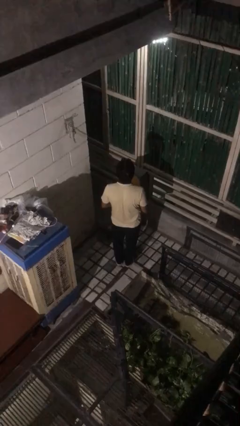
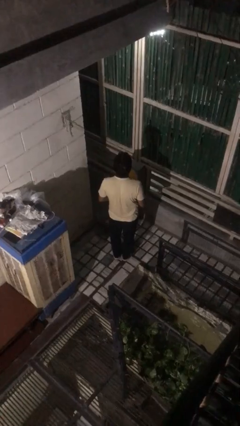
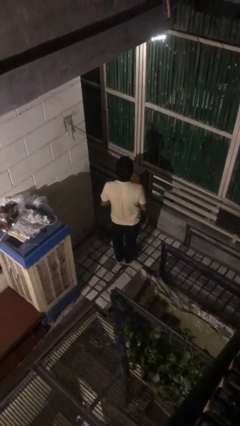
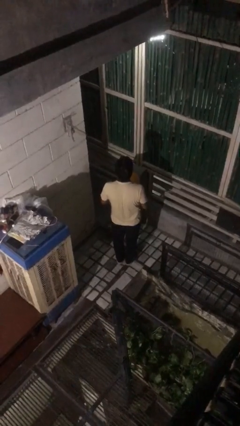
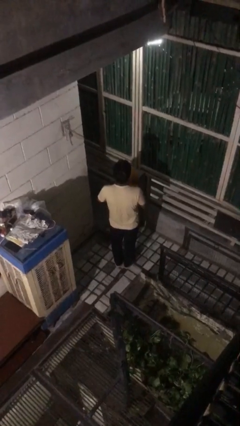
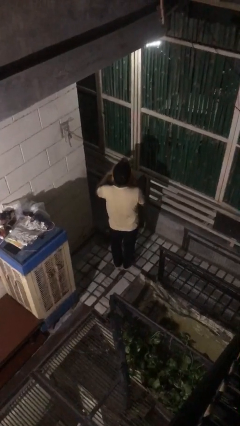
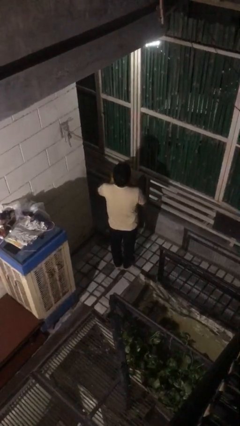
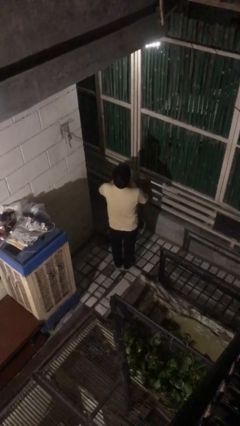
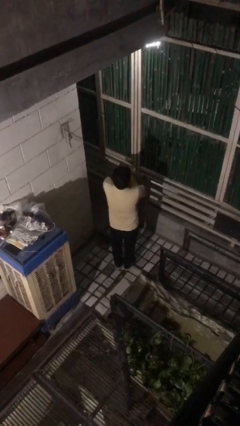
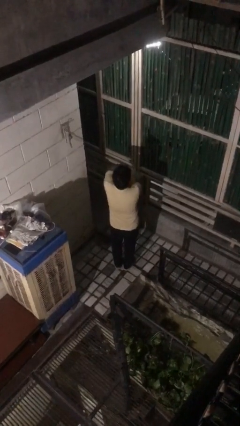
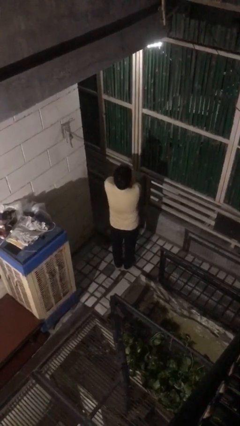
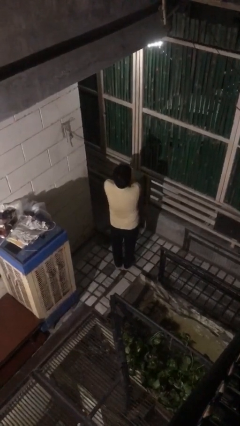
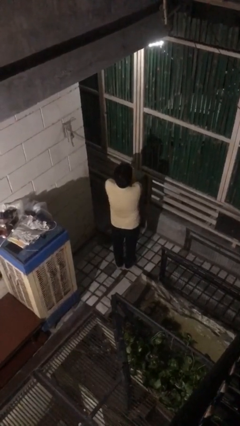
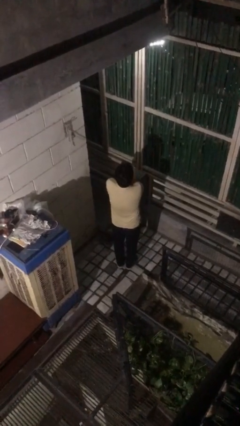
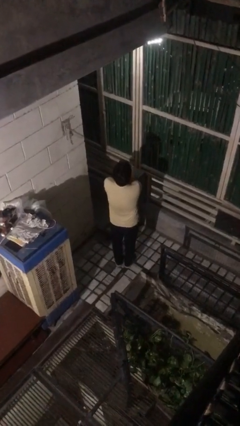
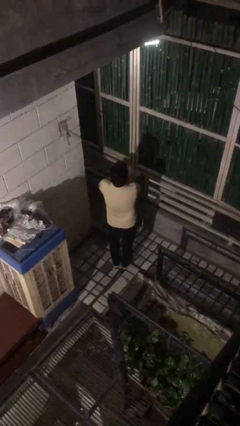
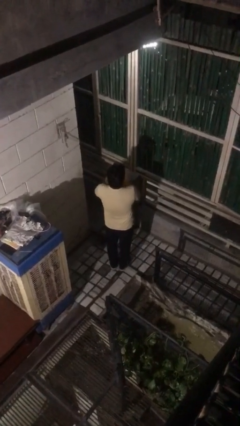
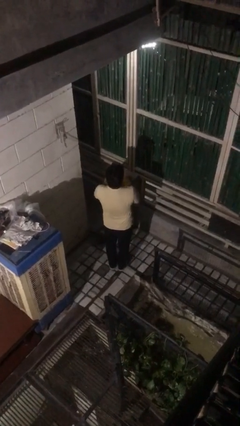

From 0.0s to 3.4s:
person hugs stuffed animal

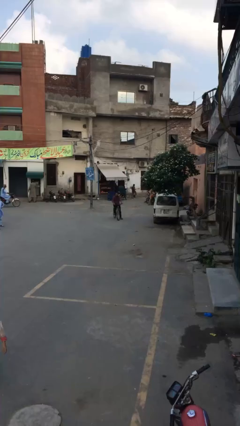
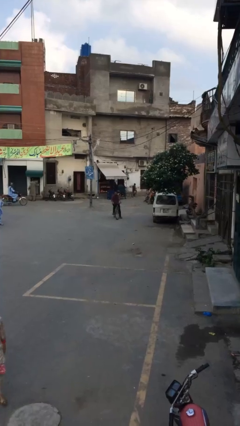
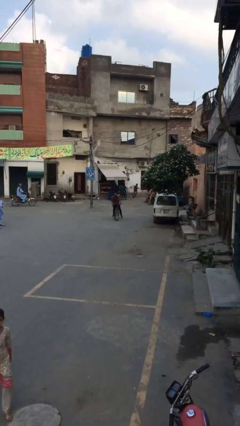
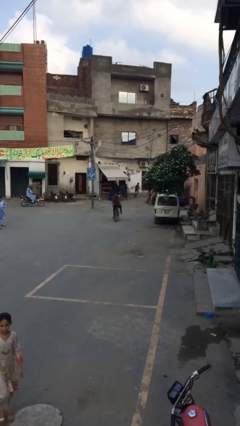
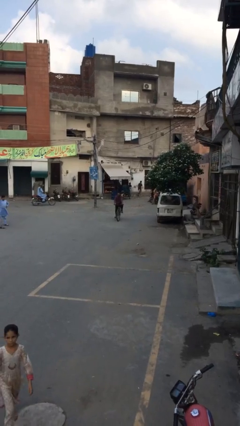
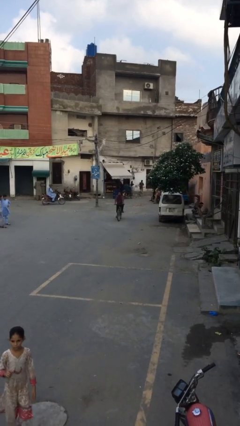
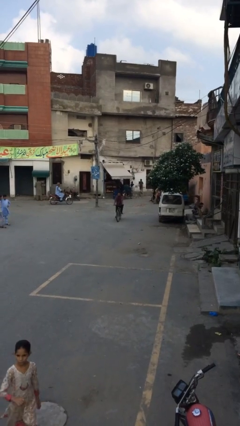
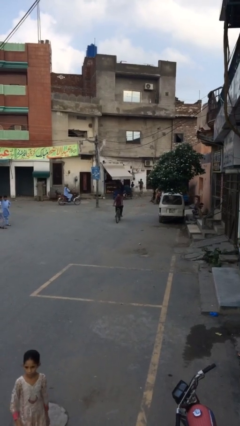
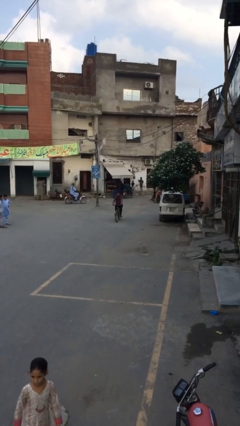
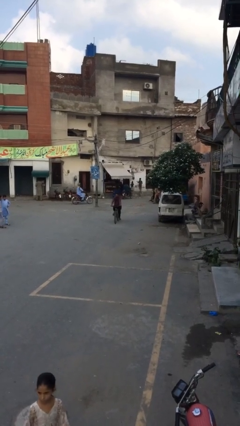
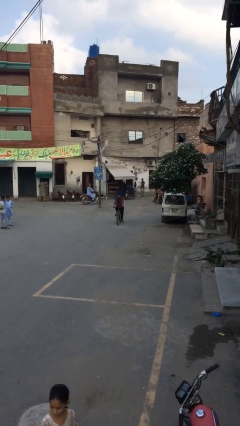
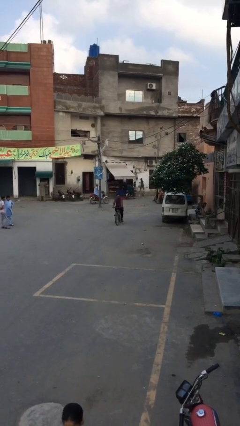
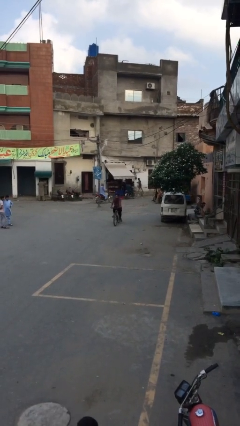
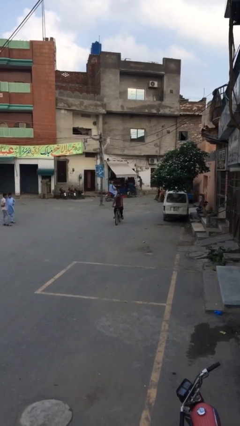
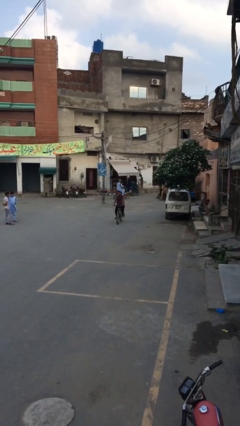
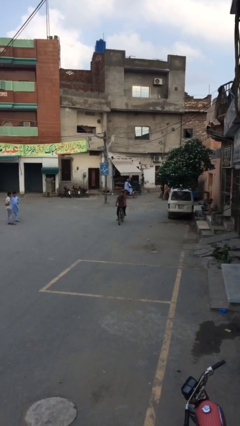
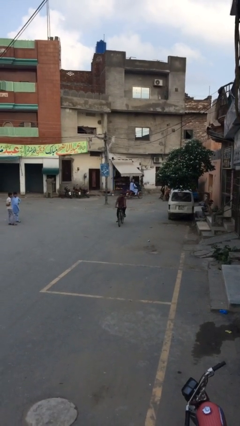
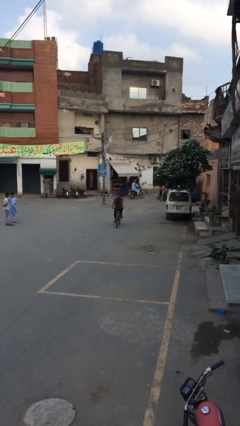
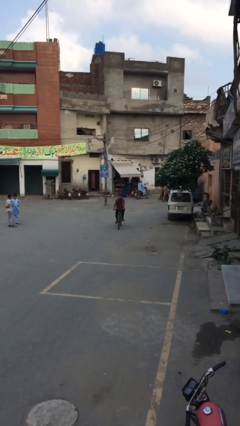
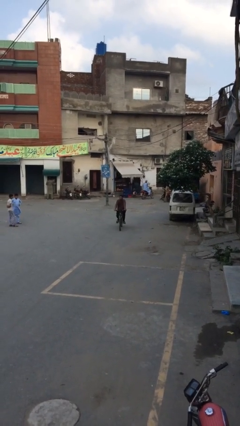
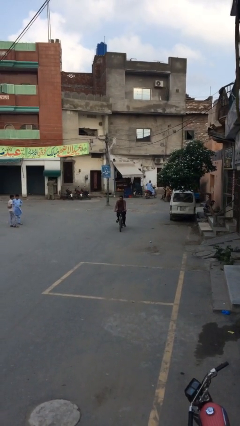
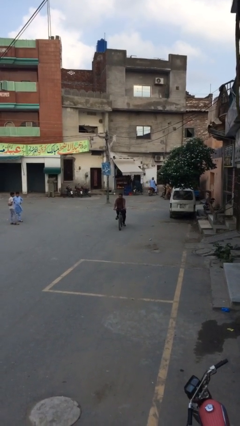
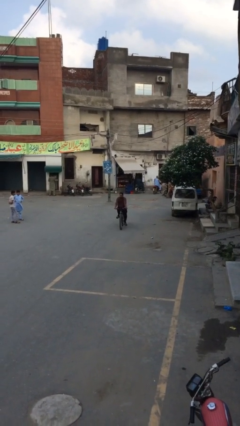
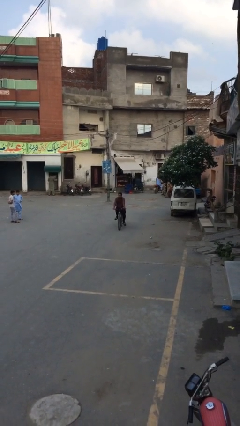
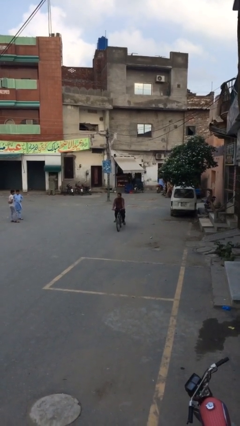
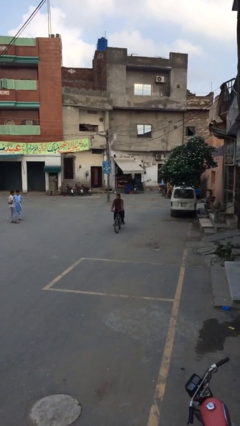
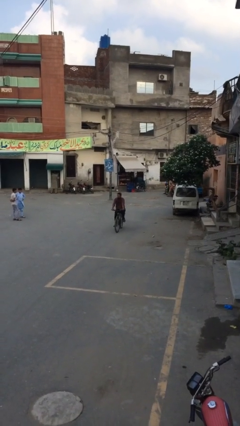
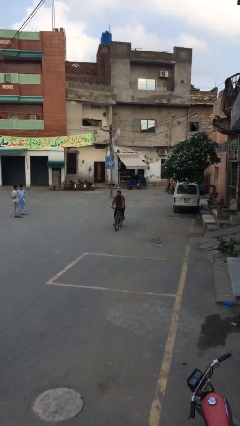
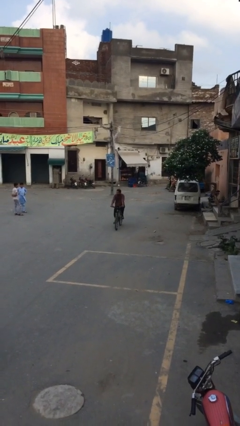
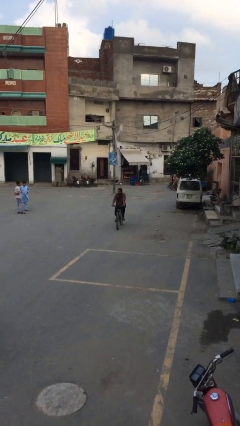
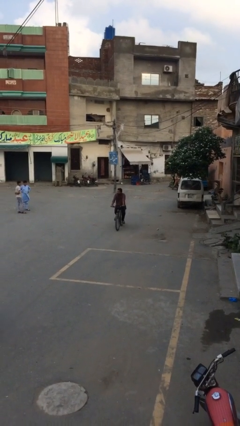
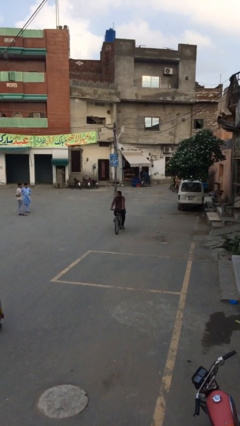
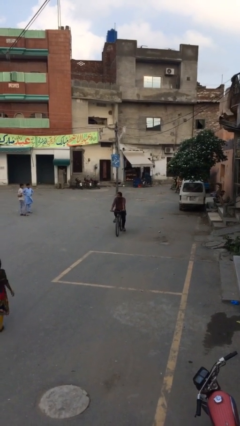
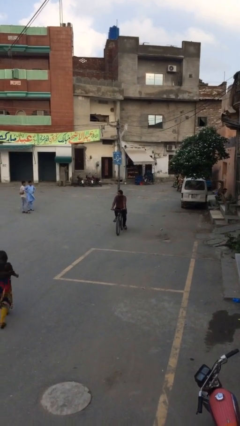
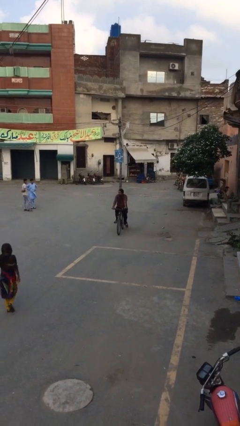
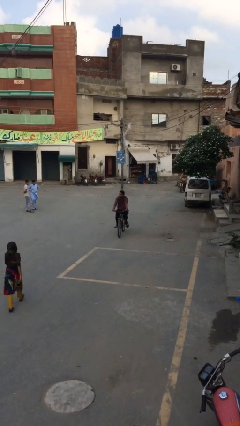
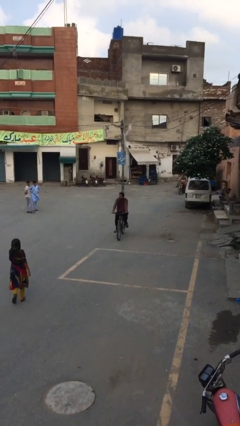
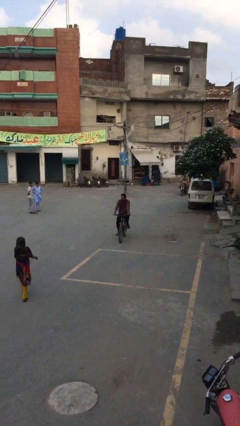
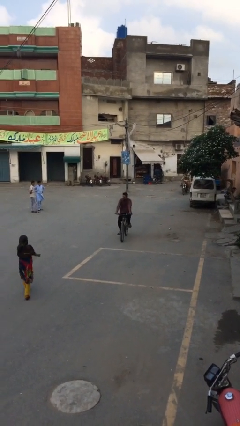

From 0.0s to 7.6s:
person rides bicycle

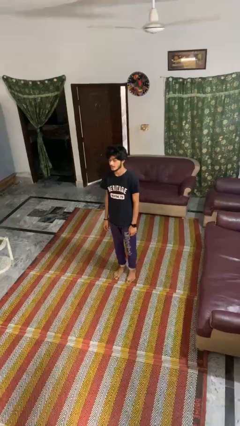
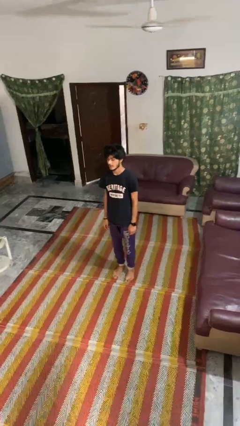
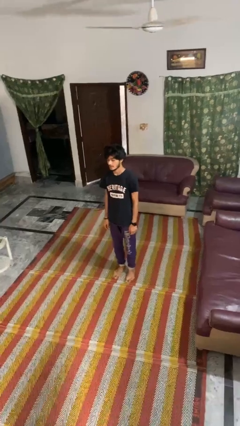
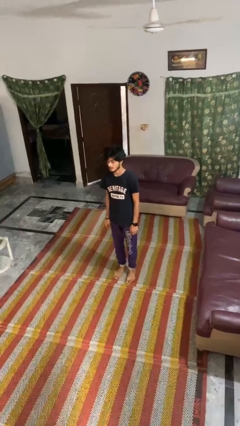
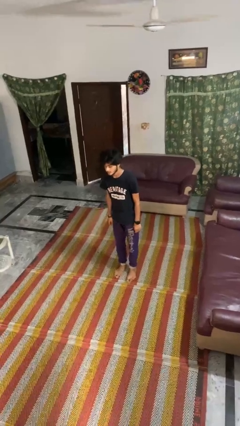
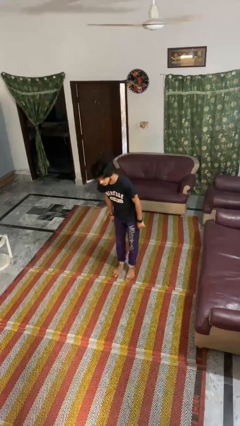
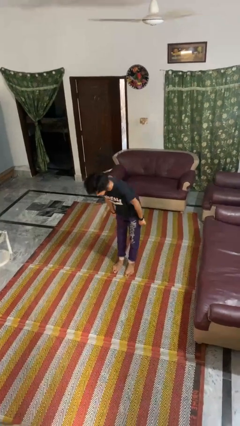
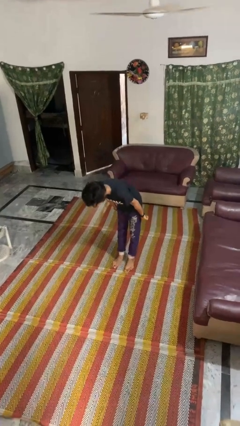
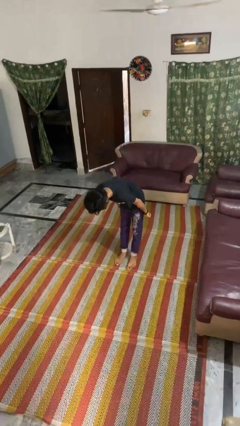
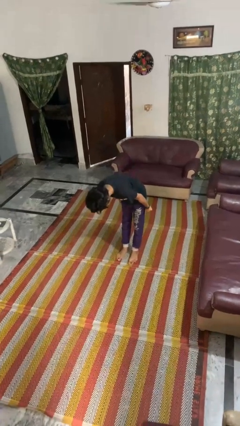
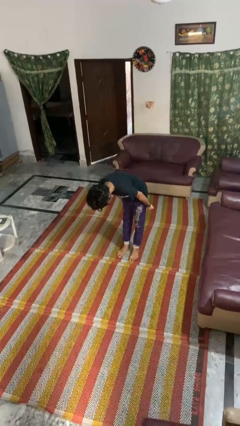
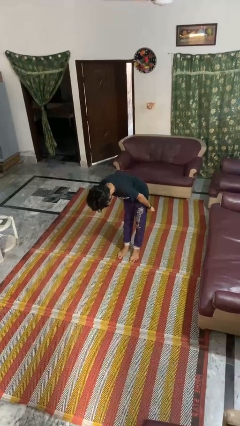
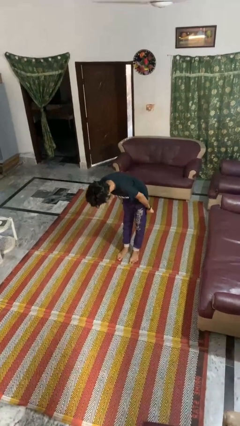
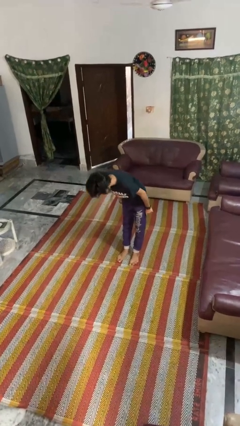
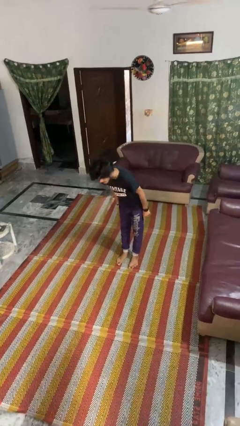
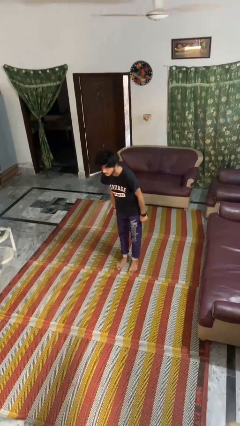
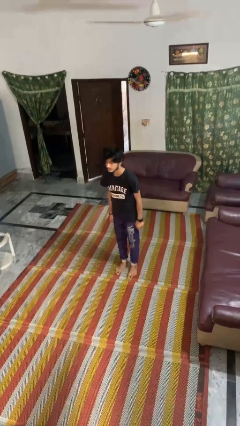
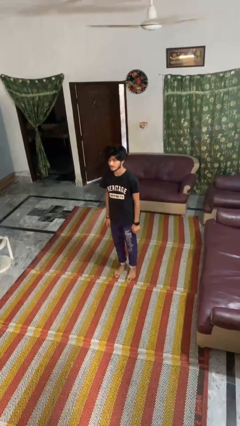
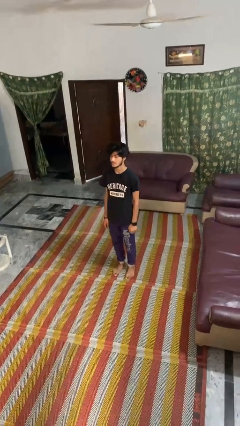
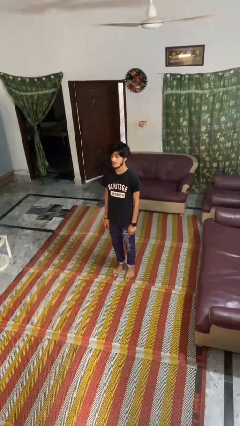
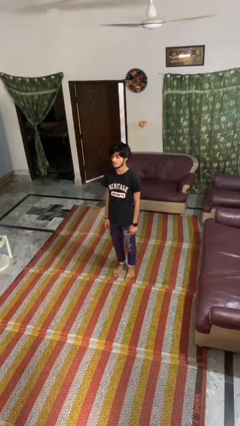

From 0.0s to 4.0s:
person bows

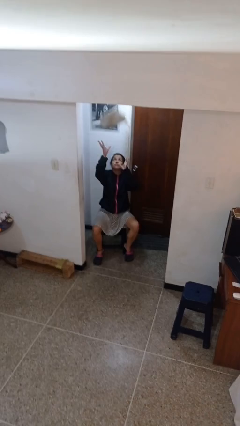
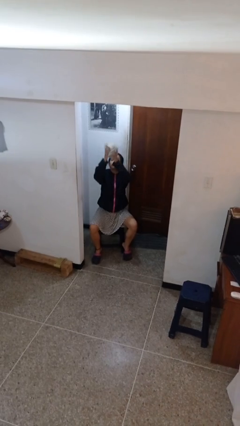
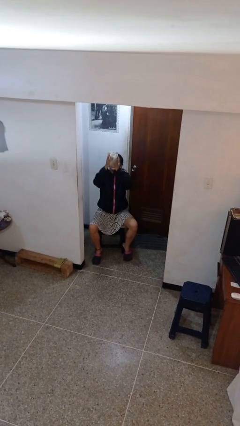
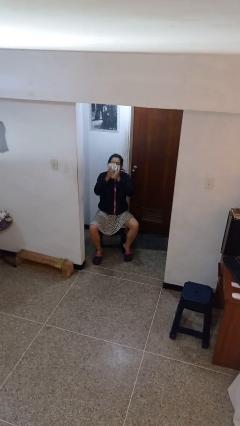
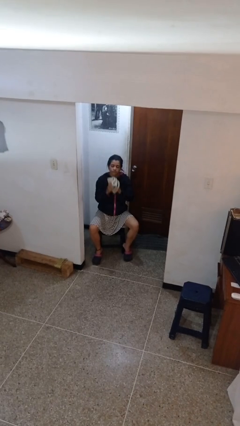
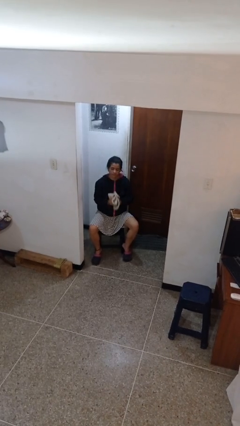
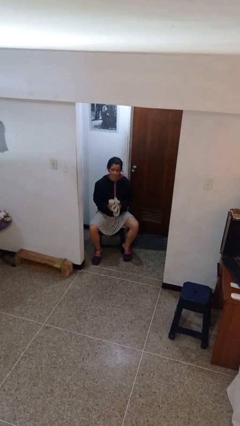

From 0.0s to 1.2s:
person catches dropped object

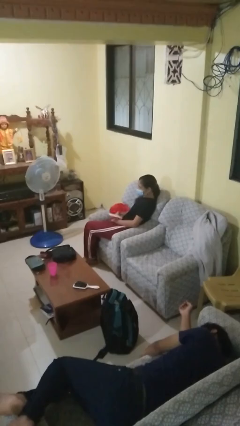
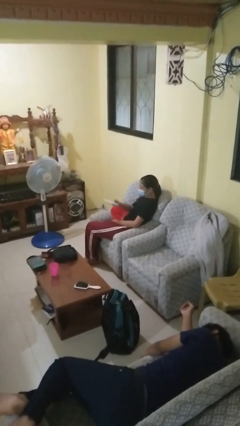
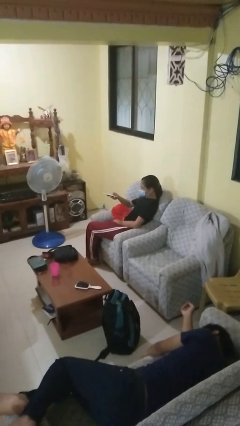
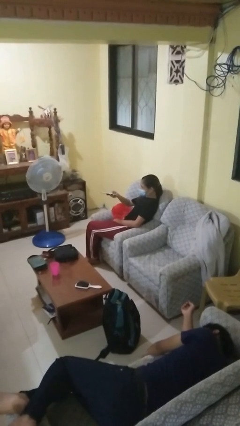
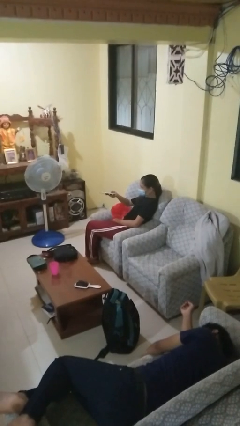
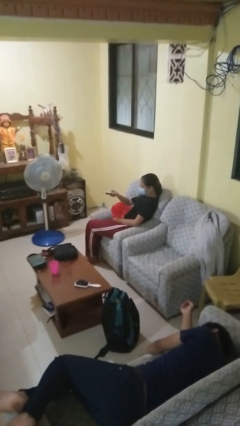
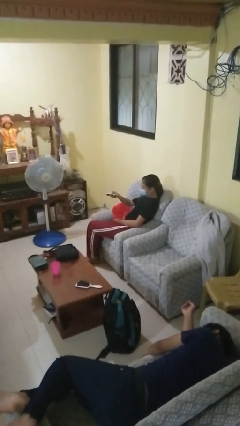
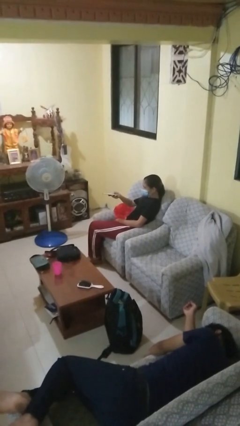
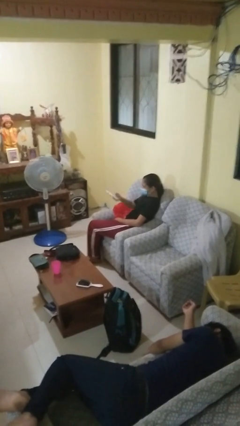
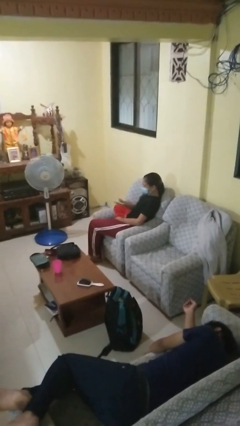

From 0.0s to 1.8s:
person uses television remote
